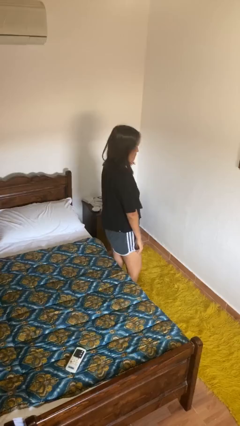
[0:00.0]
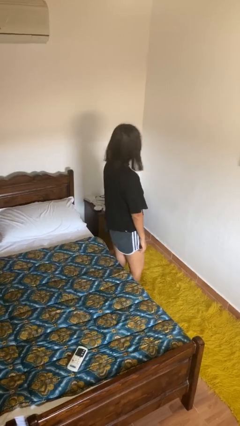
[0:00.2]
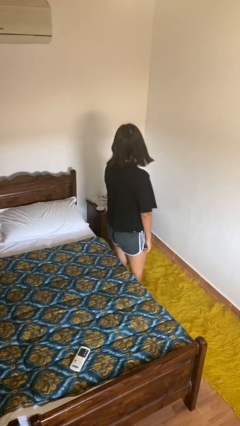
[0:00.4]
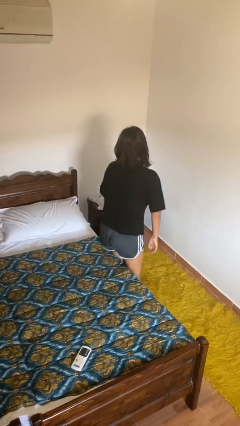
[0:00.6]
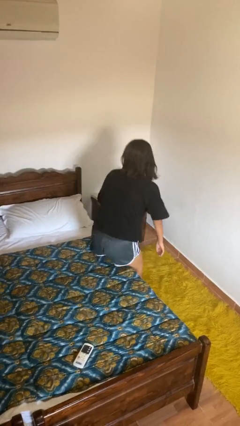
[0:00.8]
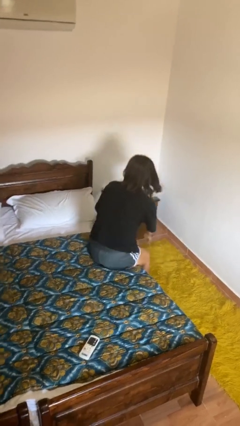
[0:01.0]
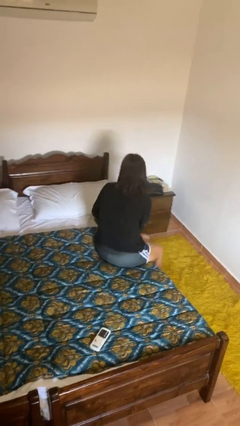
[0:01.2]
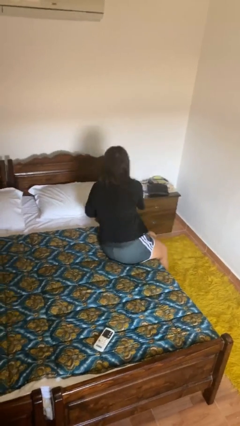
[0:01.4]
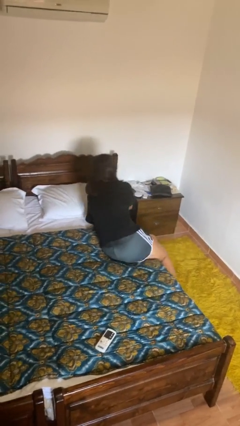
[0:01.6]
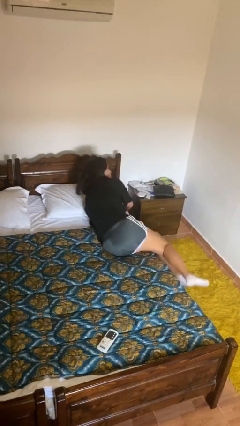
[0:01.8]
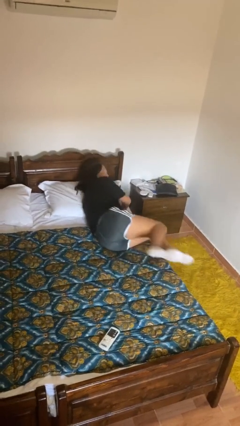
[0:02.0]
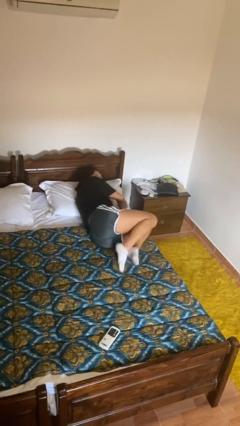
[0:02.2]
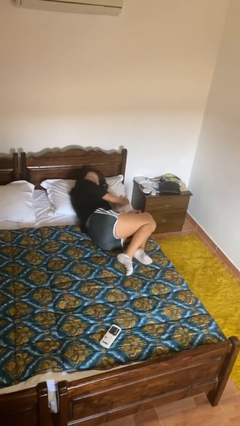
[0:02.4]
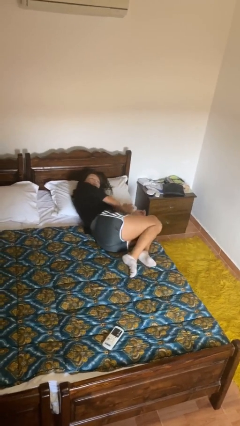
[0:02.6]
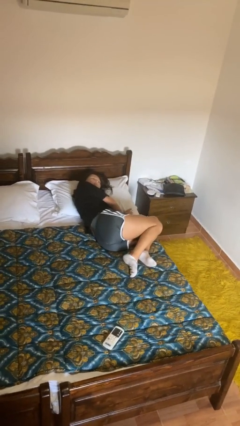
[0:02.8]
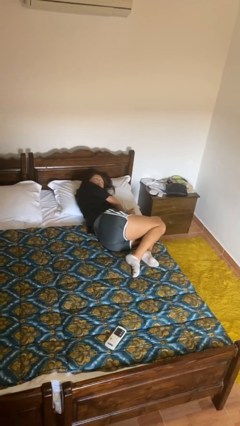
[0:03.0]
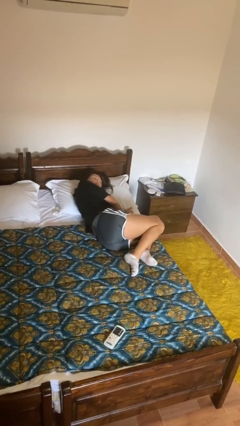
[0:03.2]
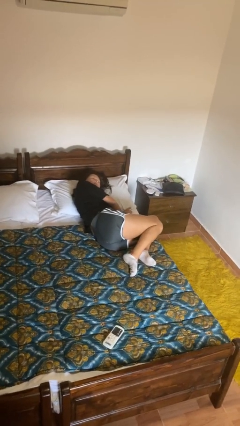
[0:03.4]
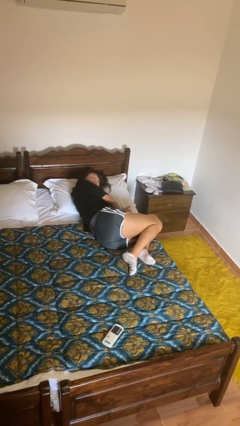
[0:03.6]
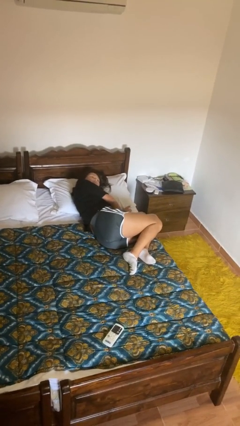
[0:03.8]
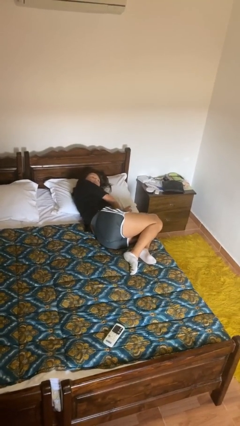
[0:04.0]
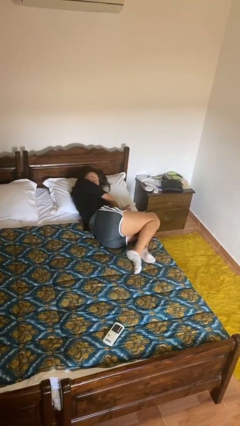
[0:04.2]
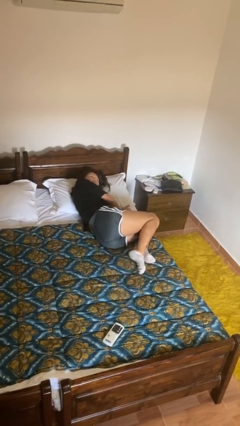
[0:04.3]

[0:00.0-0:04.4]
person lies down on bed

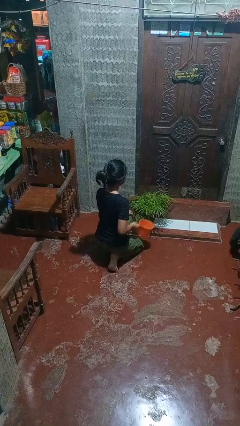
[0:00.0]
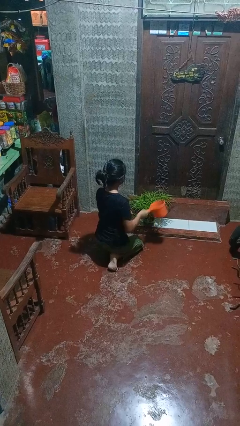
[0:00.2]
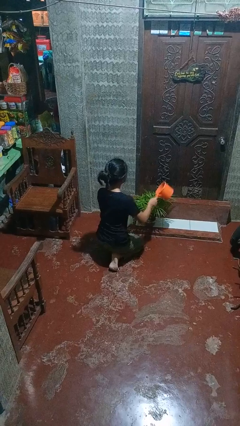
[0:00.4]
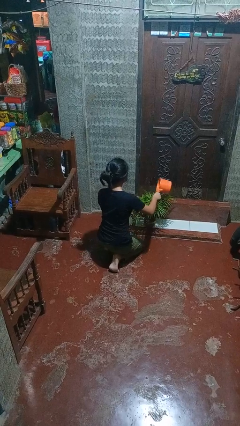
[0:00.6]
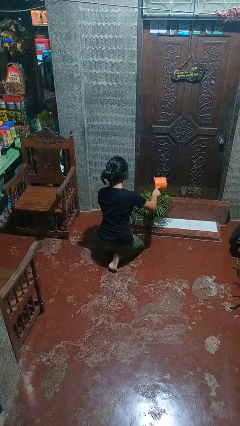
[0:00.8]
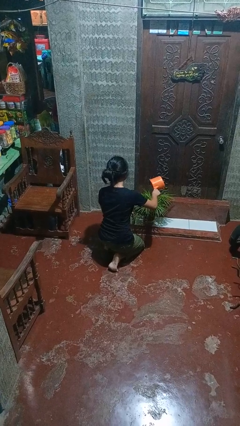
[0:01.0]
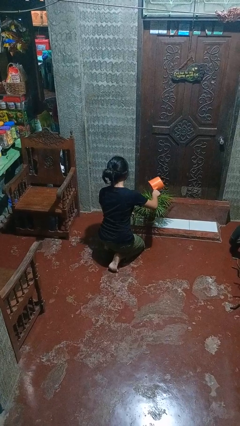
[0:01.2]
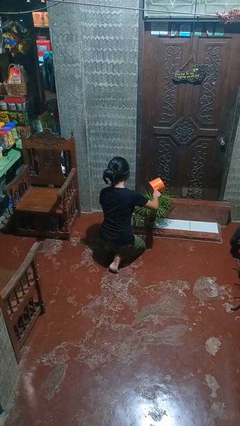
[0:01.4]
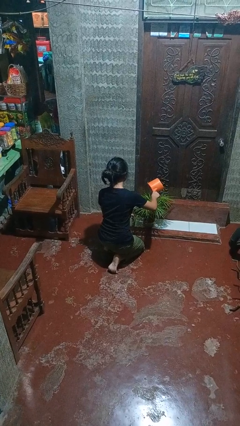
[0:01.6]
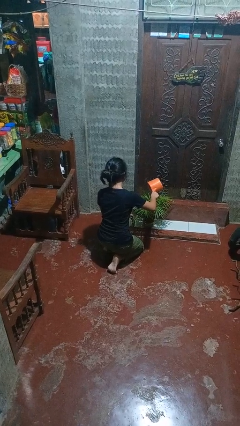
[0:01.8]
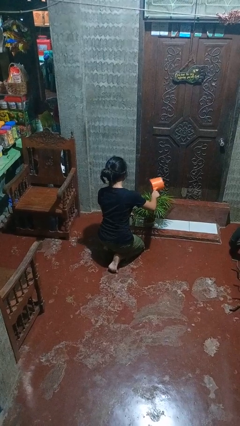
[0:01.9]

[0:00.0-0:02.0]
person waters houseplant

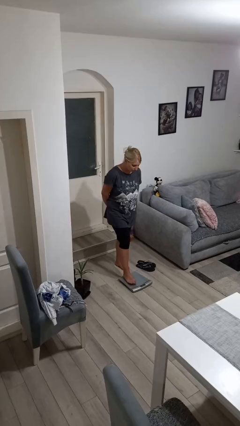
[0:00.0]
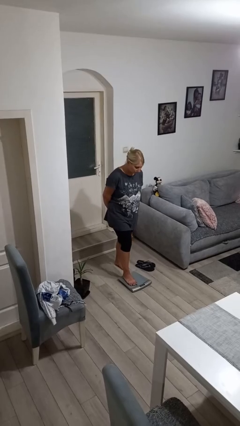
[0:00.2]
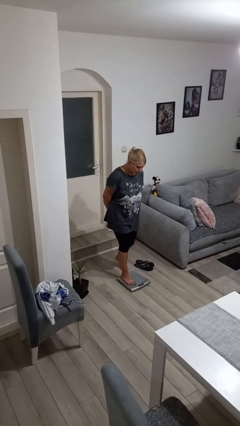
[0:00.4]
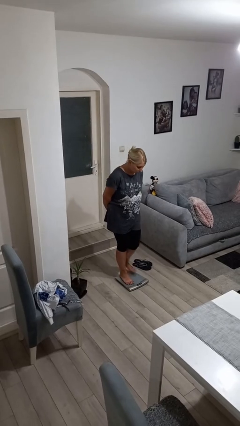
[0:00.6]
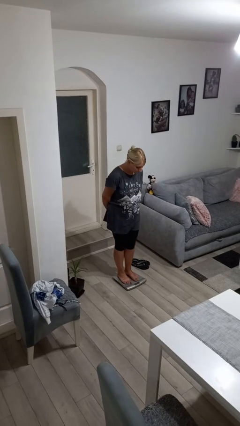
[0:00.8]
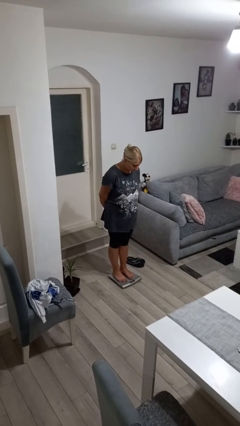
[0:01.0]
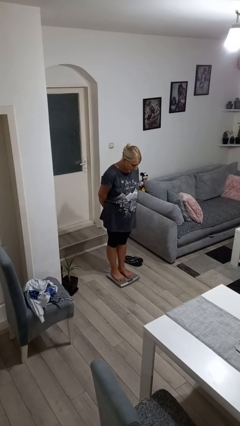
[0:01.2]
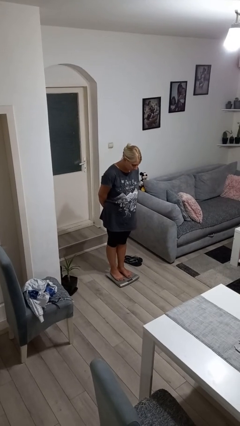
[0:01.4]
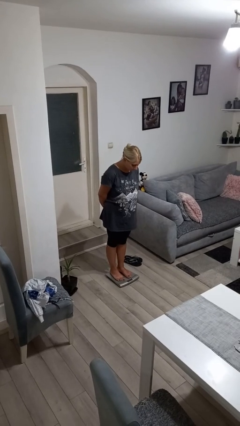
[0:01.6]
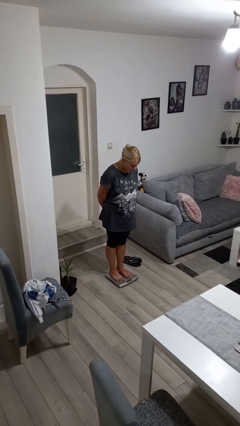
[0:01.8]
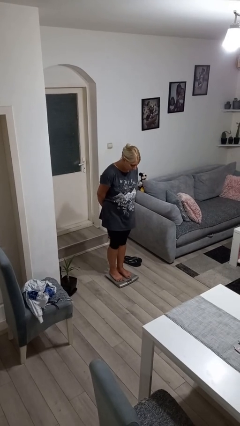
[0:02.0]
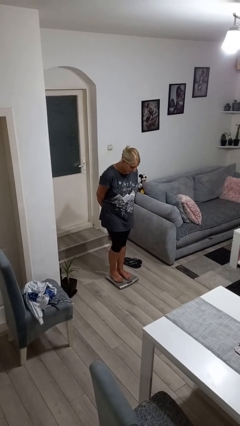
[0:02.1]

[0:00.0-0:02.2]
person uses bodyweight scale

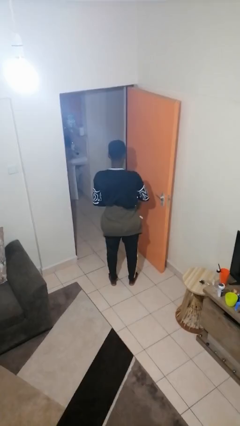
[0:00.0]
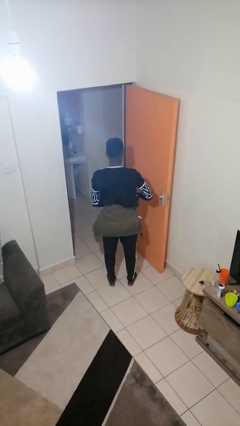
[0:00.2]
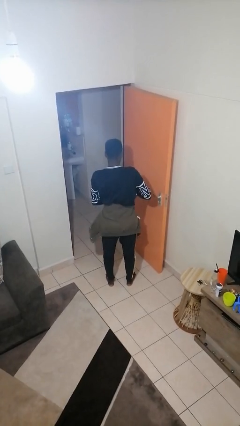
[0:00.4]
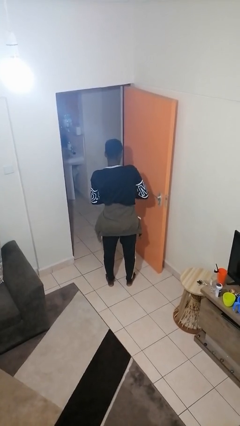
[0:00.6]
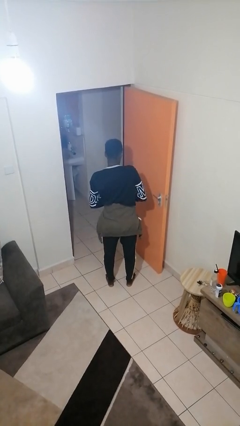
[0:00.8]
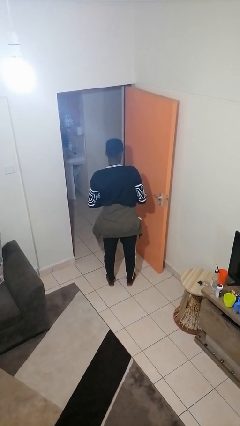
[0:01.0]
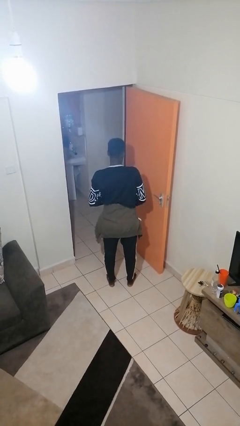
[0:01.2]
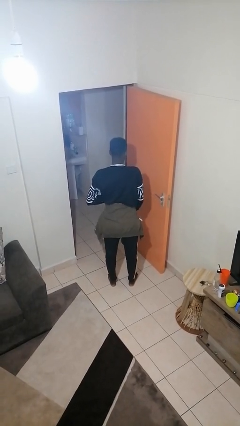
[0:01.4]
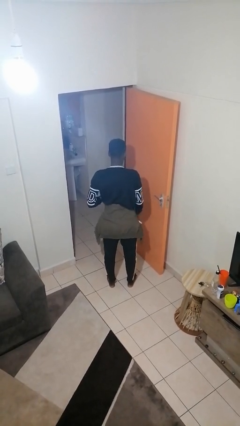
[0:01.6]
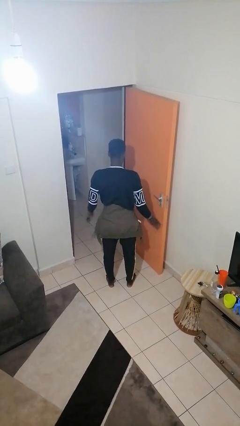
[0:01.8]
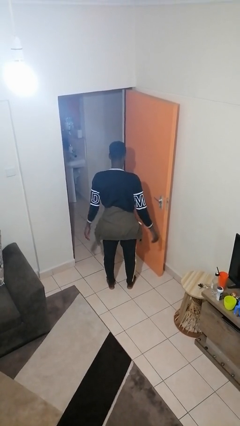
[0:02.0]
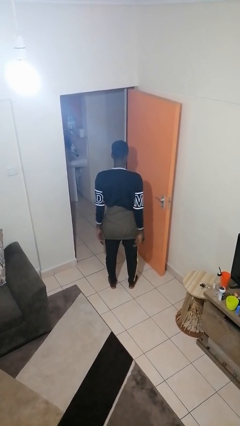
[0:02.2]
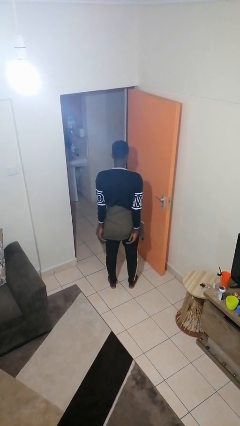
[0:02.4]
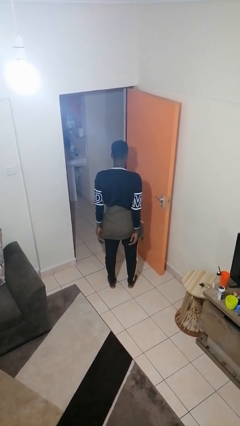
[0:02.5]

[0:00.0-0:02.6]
person ties jacket around waist

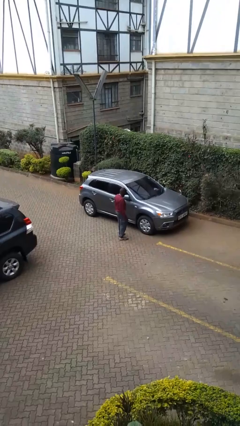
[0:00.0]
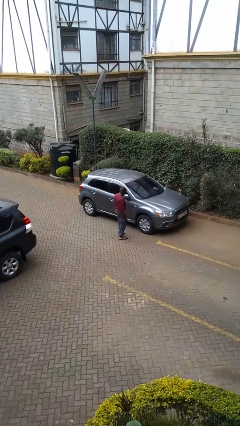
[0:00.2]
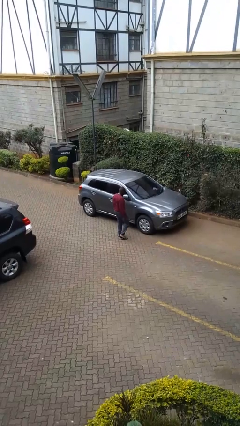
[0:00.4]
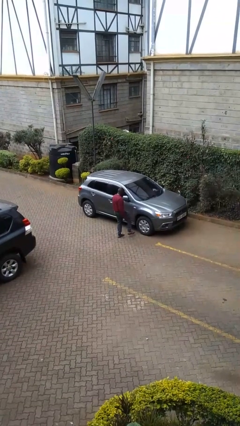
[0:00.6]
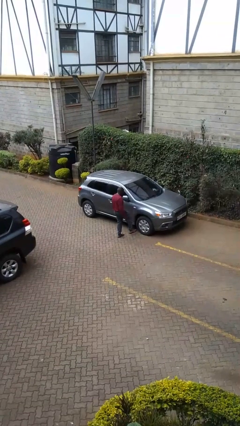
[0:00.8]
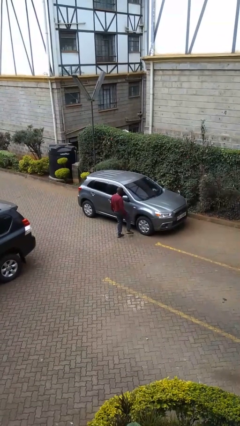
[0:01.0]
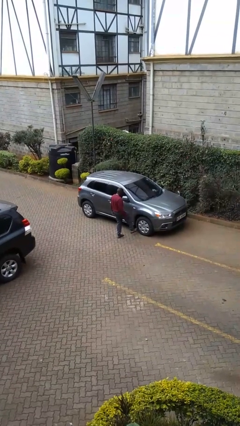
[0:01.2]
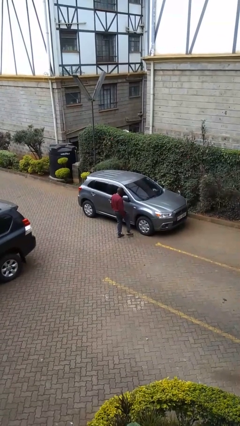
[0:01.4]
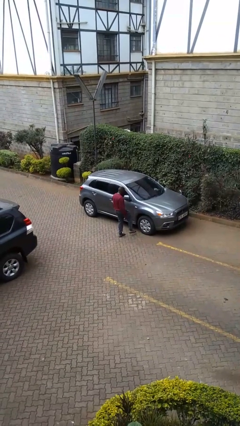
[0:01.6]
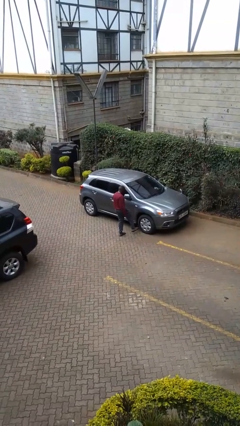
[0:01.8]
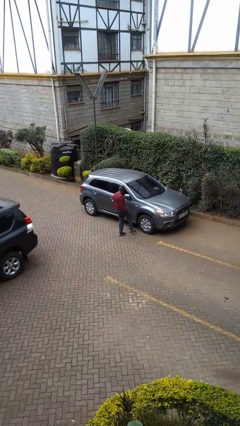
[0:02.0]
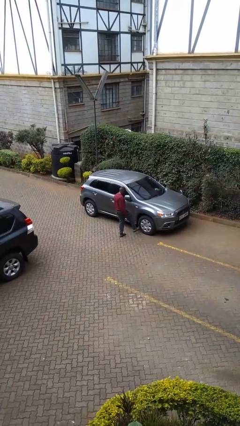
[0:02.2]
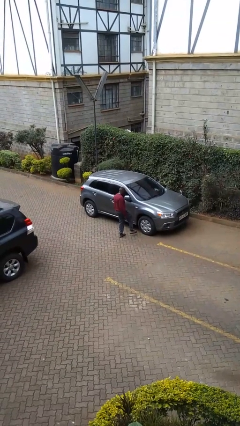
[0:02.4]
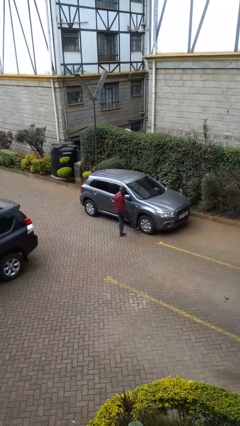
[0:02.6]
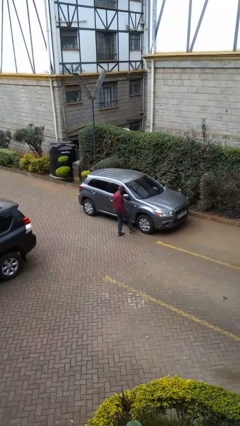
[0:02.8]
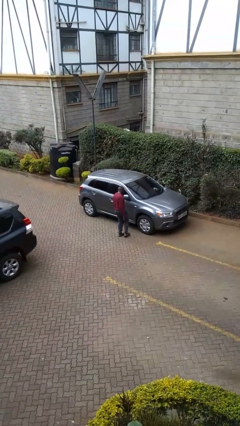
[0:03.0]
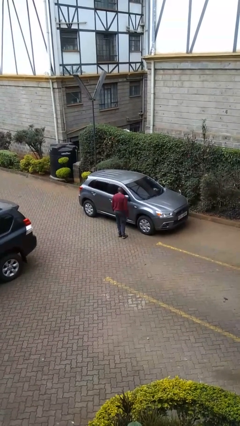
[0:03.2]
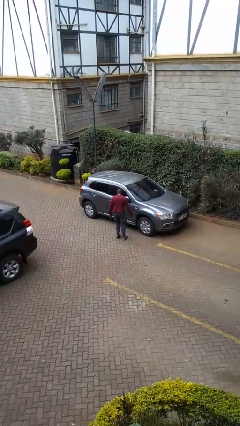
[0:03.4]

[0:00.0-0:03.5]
person kicks car tires

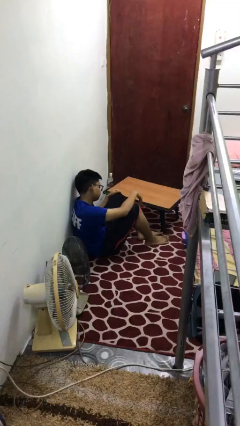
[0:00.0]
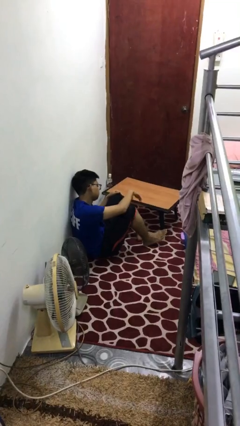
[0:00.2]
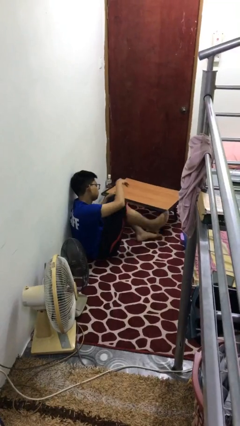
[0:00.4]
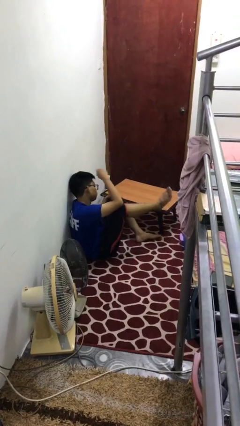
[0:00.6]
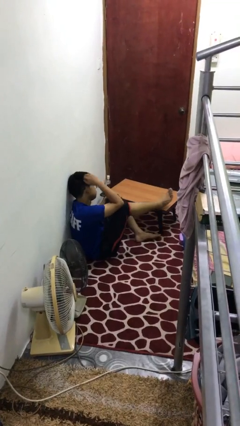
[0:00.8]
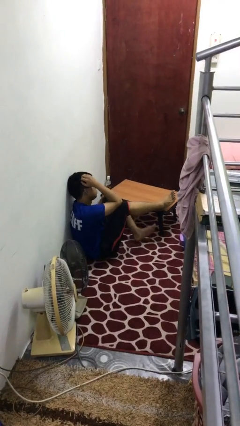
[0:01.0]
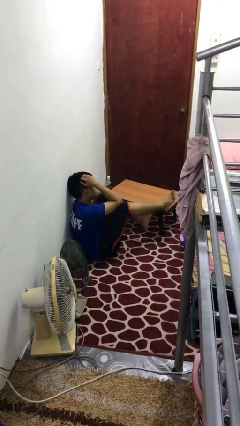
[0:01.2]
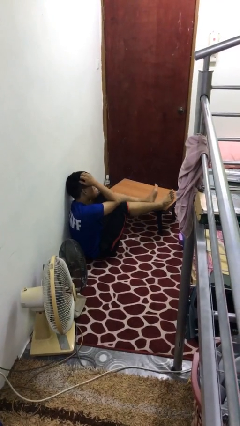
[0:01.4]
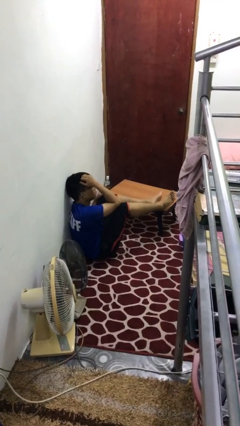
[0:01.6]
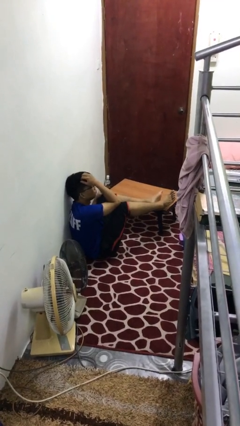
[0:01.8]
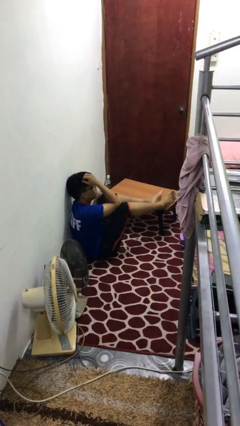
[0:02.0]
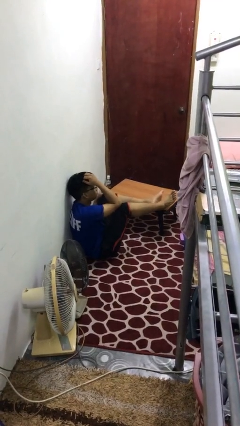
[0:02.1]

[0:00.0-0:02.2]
person puts feet up
